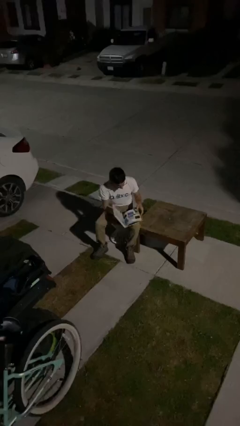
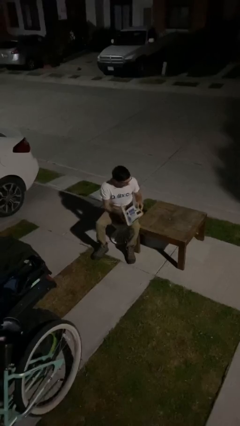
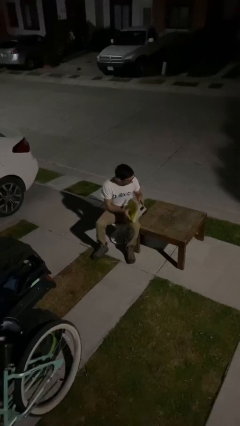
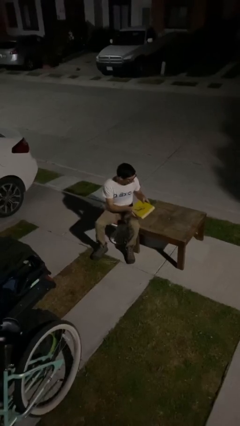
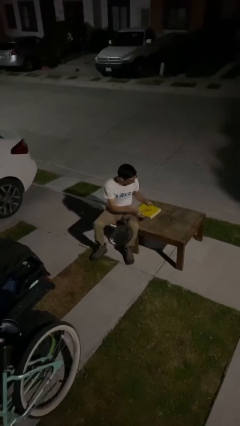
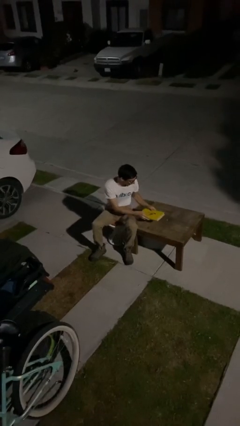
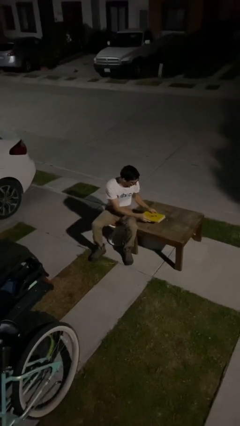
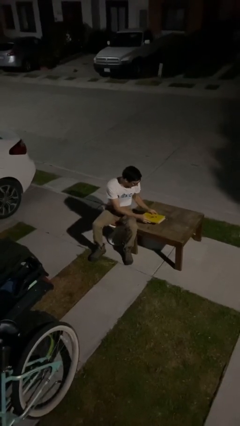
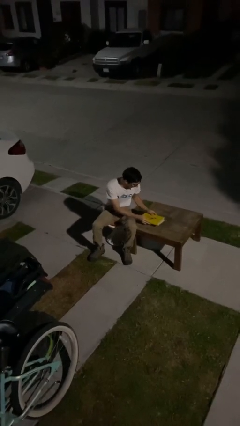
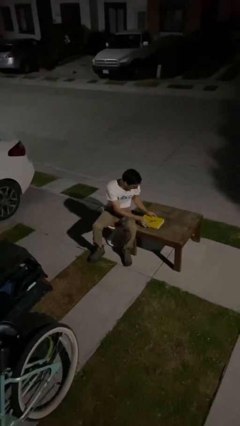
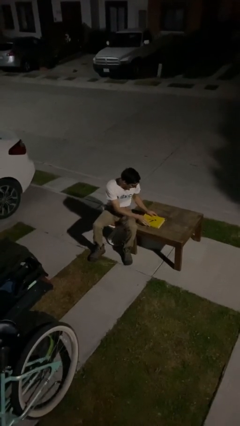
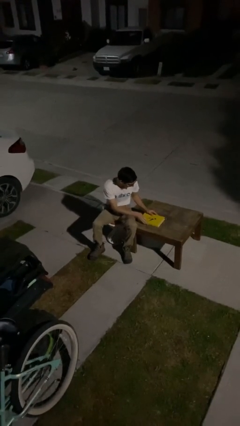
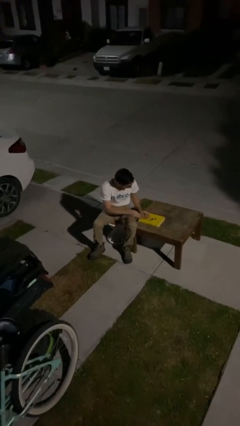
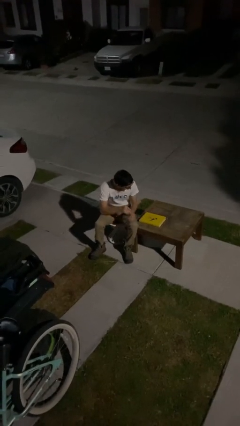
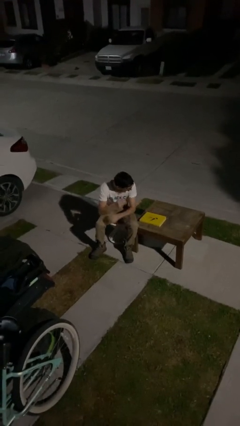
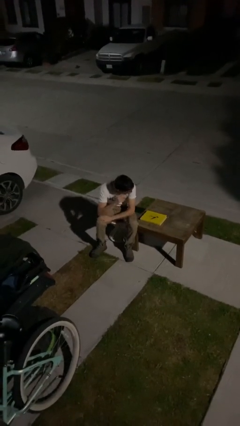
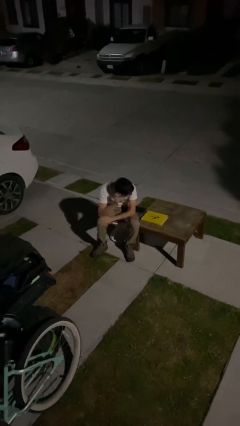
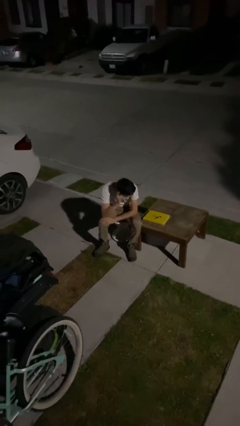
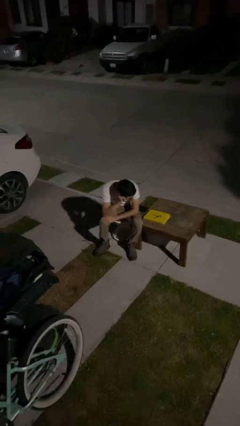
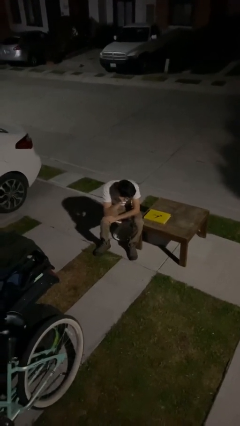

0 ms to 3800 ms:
person puts down object on table

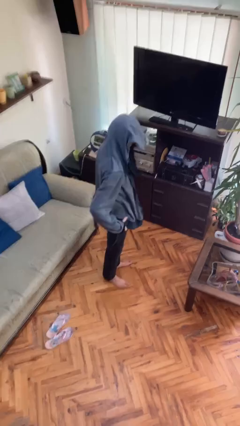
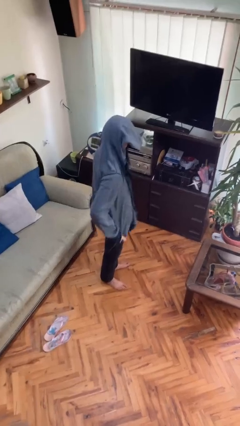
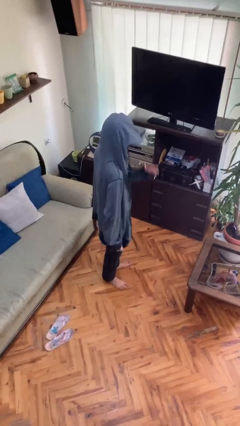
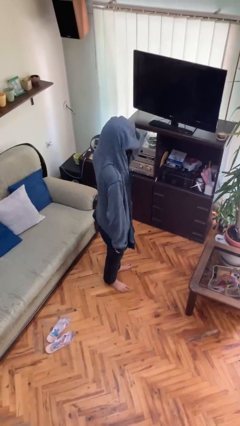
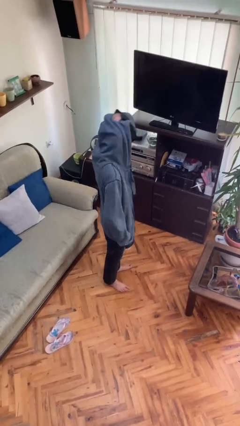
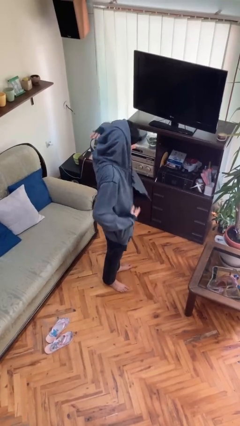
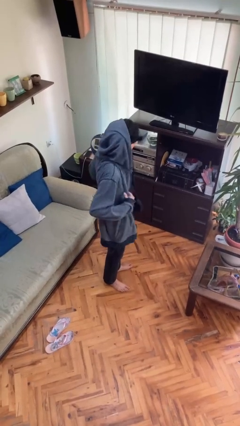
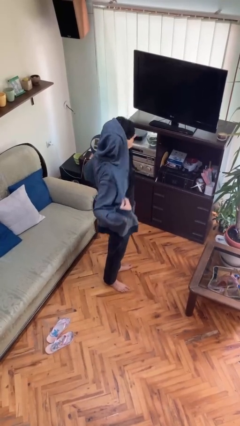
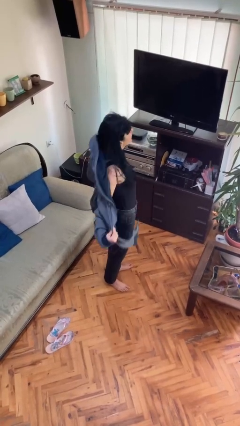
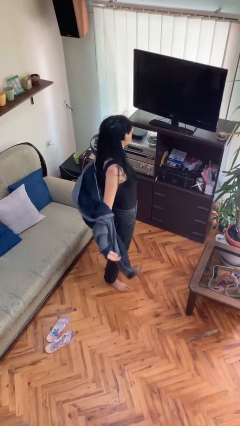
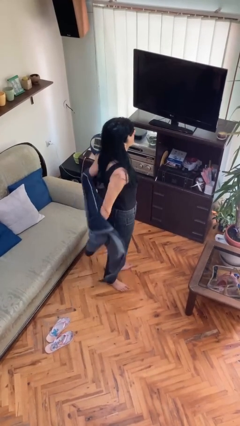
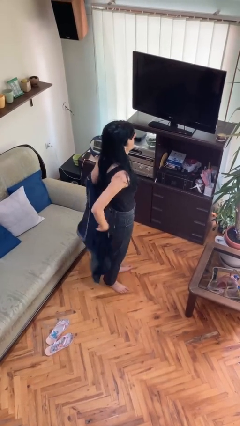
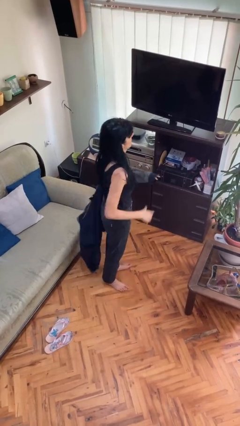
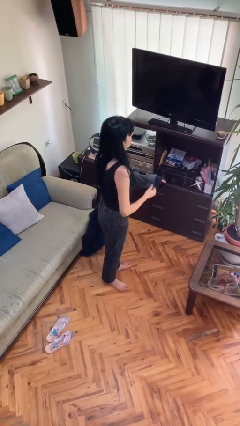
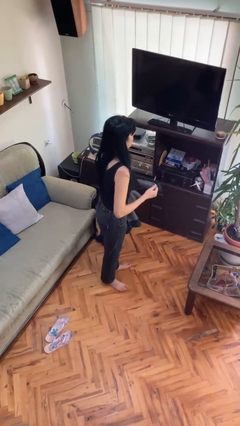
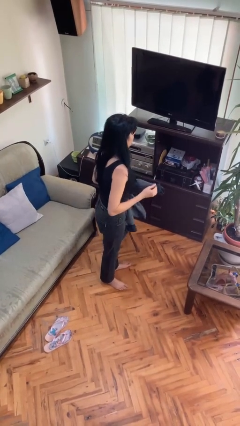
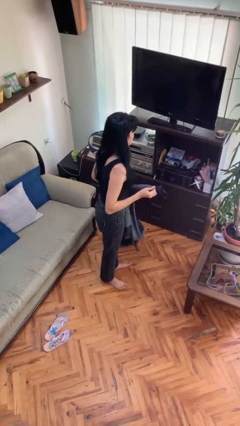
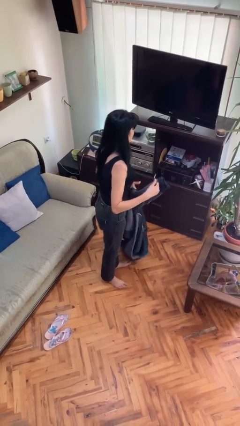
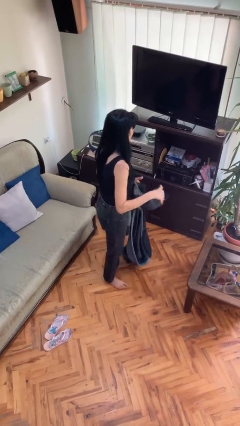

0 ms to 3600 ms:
person takes off hoodie

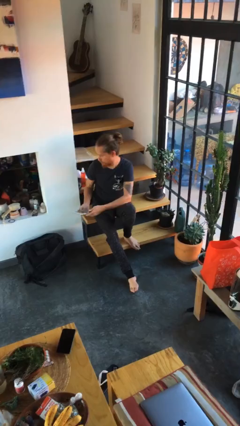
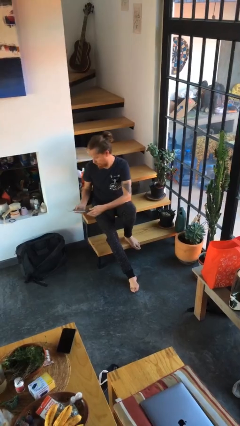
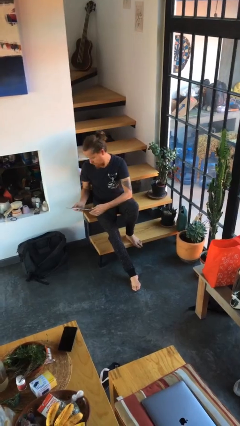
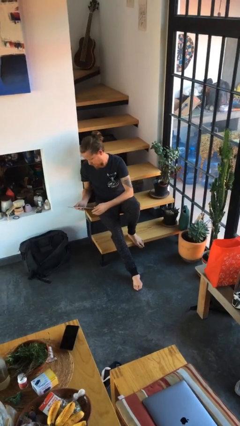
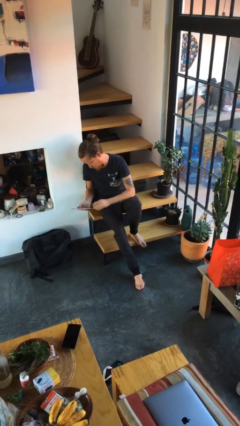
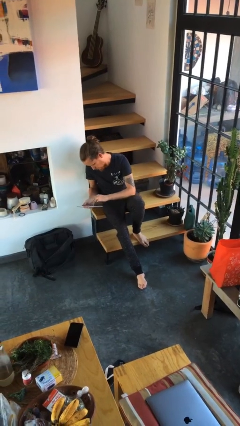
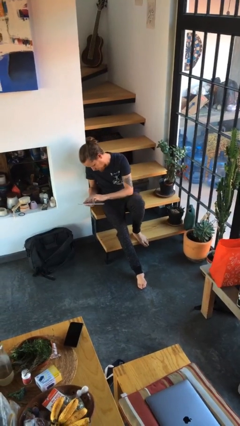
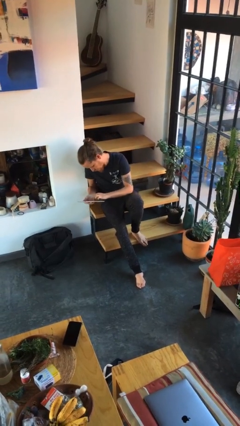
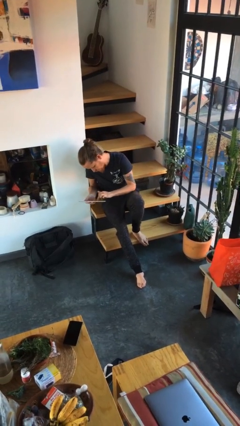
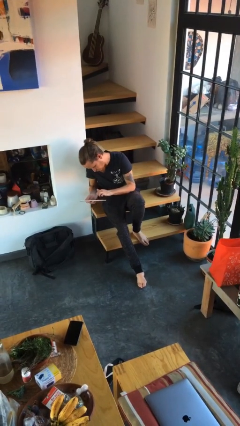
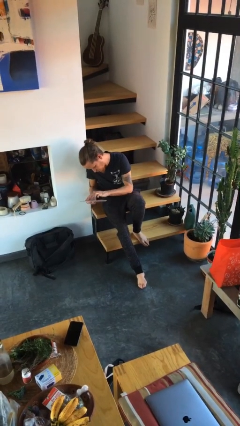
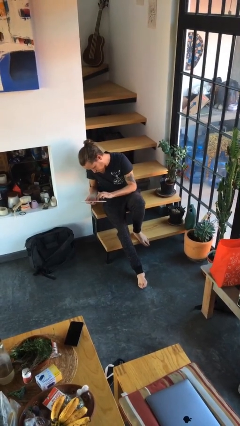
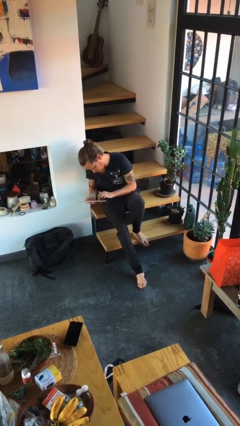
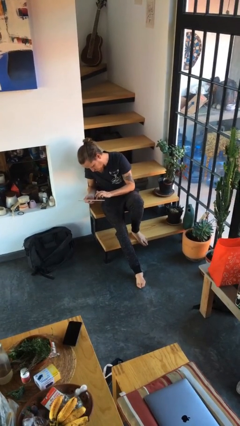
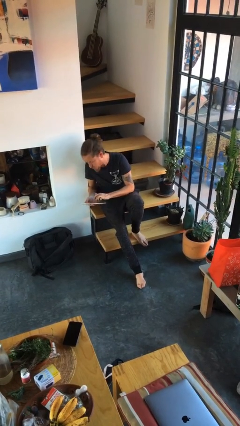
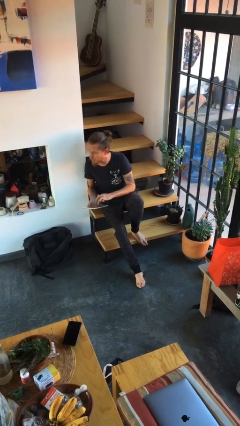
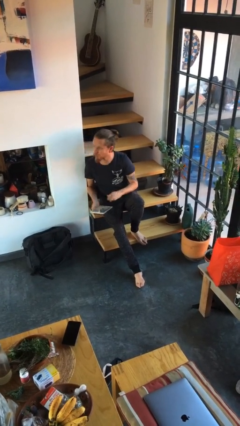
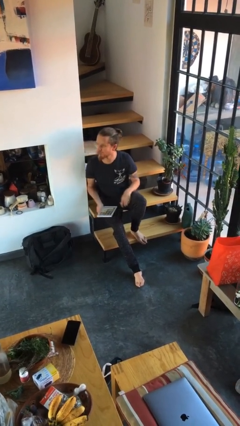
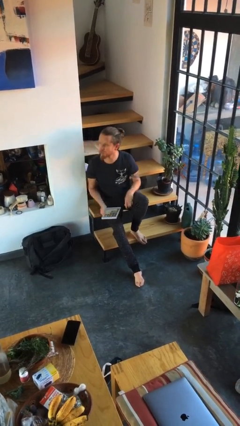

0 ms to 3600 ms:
person interacts with tablet

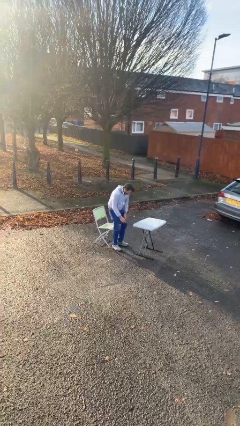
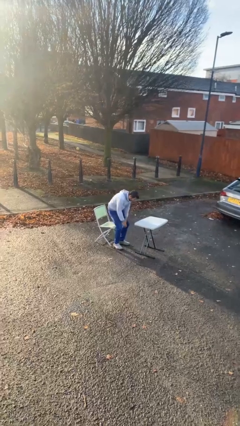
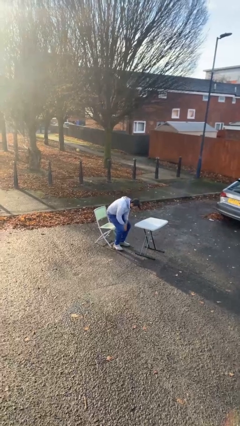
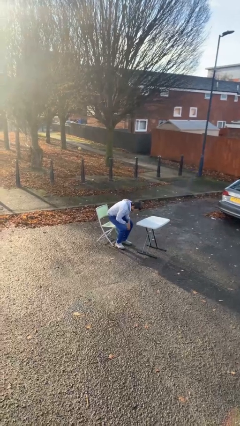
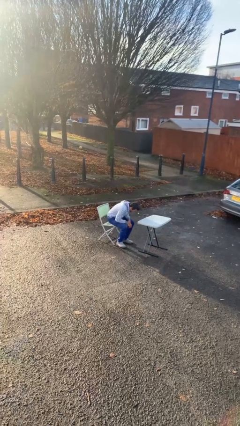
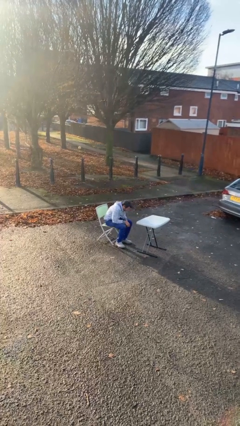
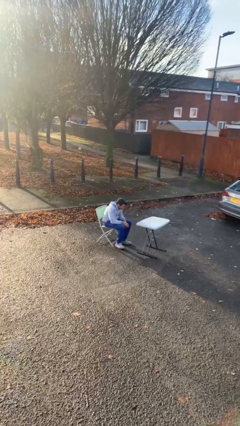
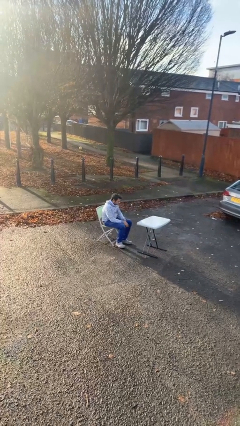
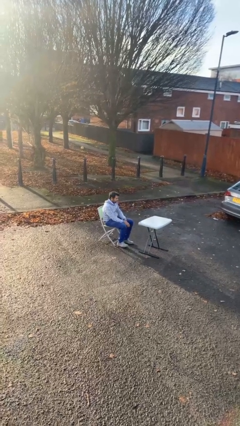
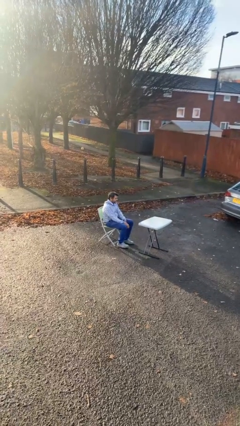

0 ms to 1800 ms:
person sits down

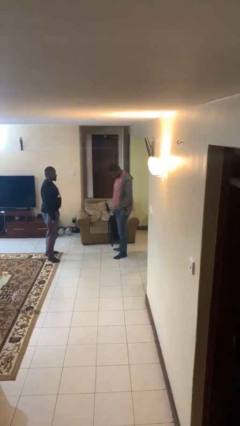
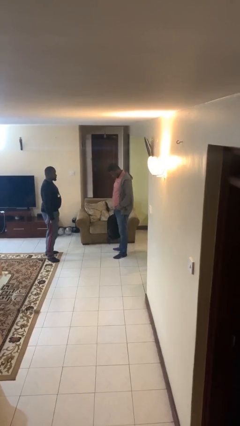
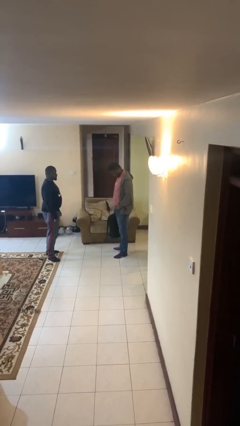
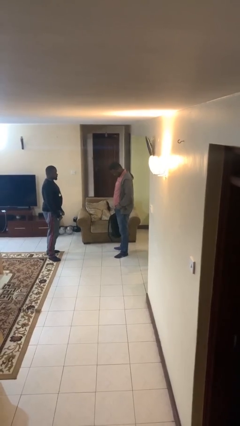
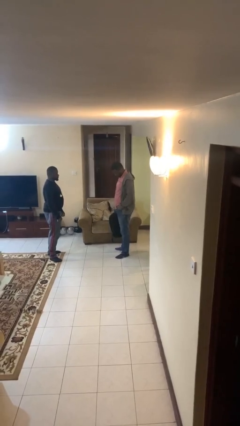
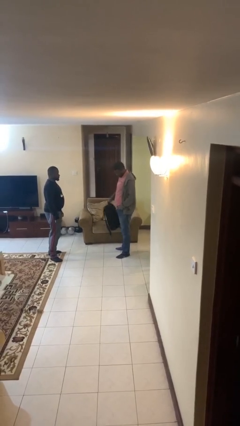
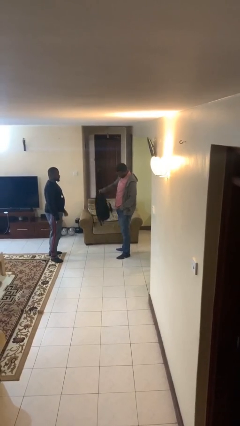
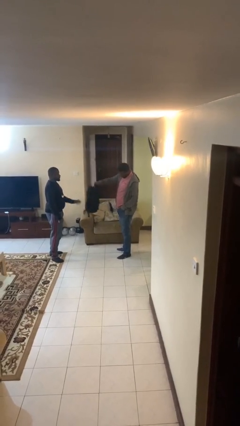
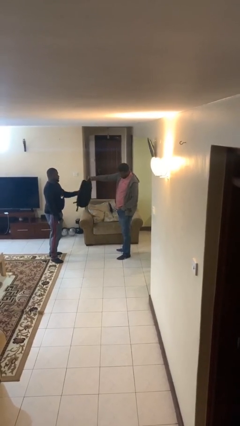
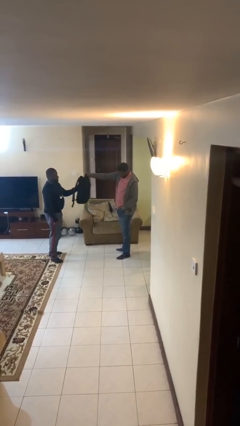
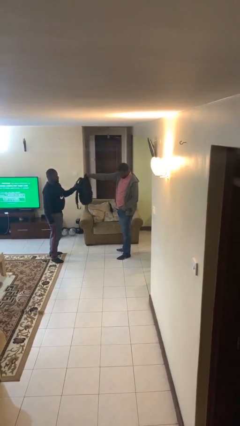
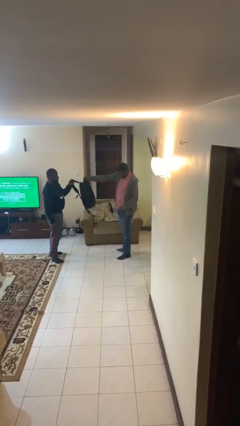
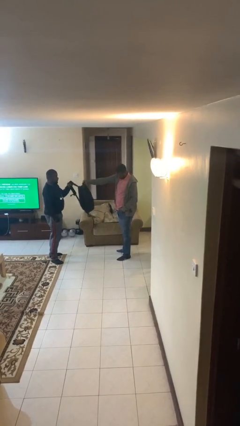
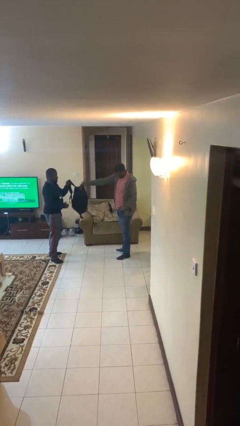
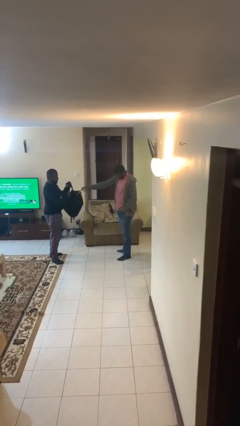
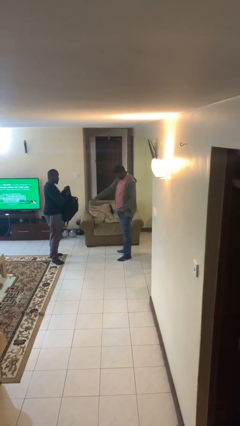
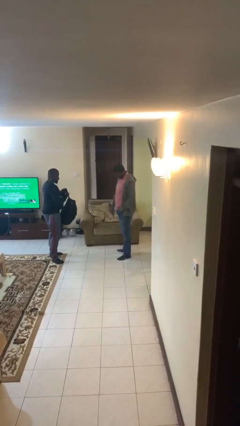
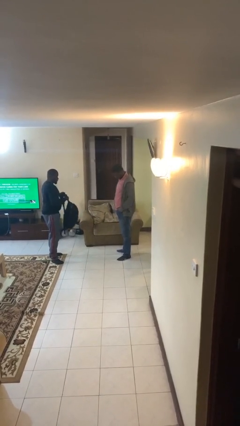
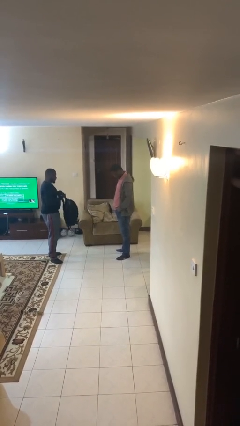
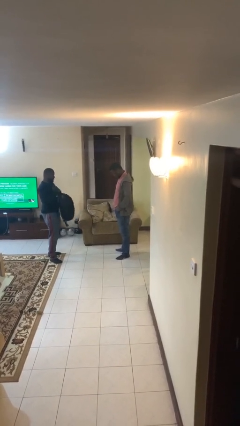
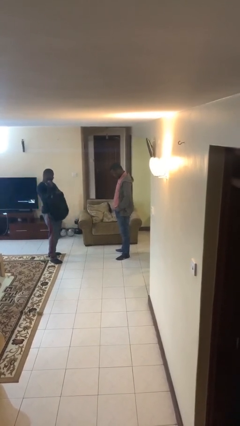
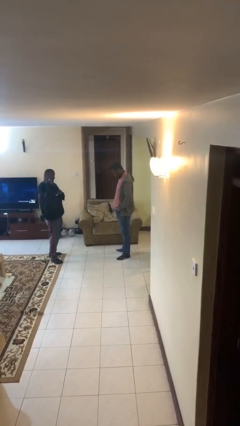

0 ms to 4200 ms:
person transfers object to person

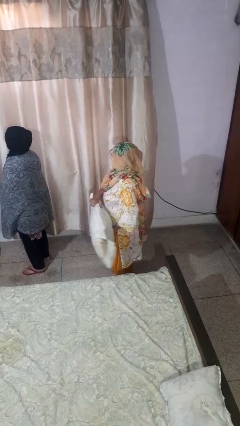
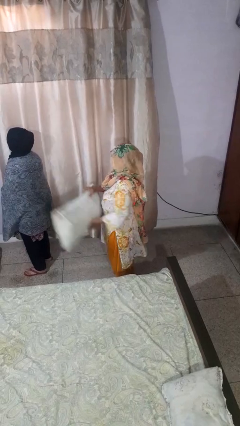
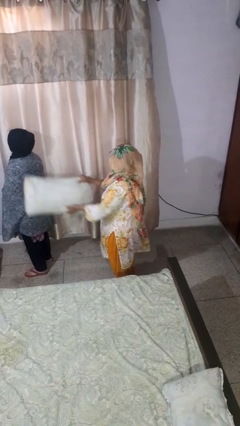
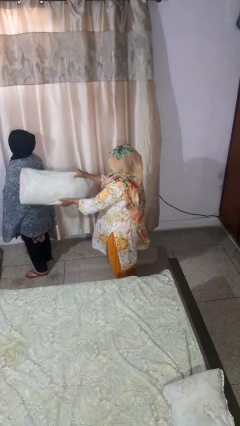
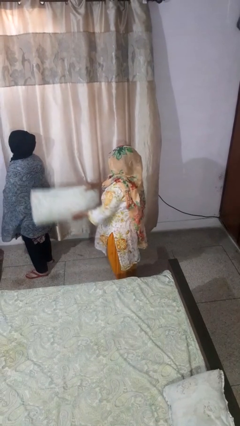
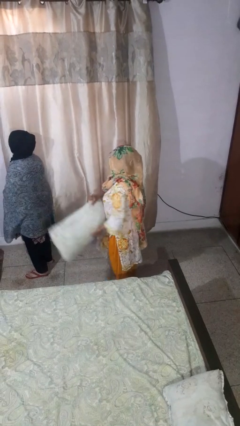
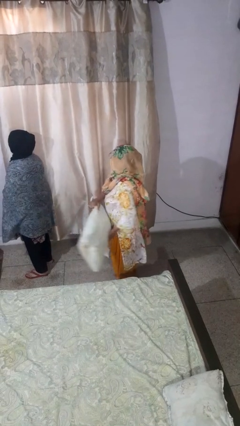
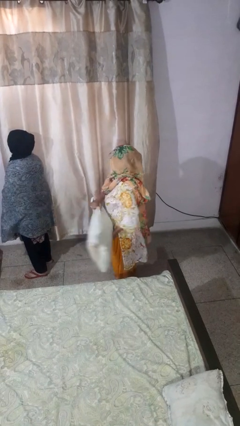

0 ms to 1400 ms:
person hits person with pillow
